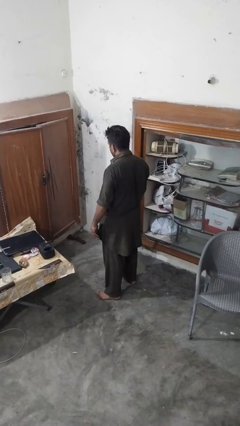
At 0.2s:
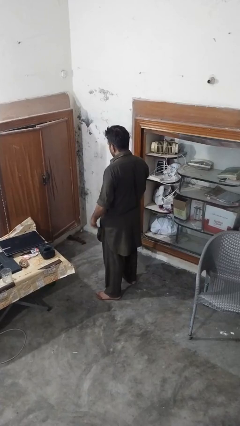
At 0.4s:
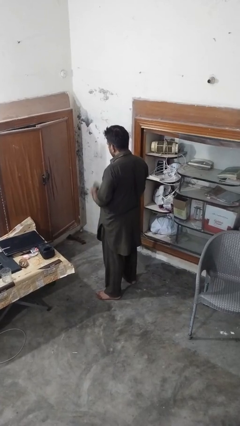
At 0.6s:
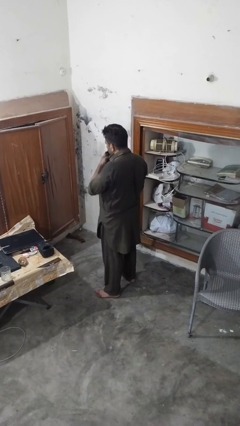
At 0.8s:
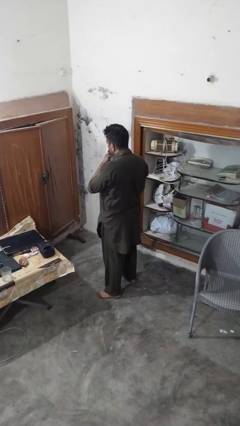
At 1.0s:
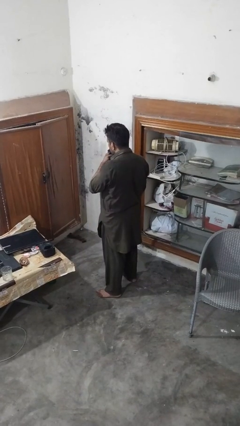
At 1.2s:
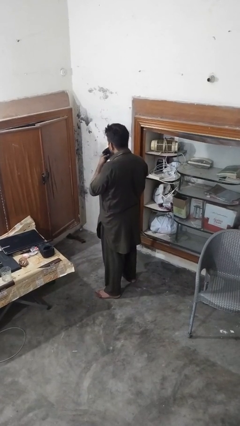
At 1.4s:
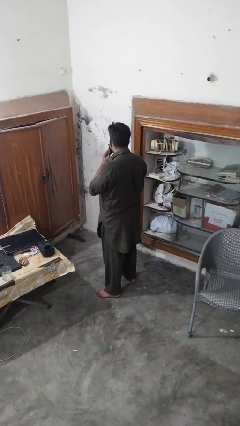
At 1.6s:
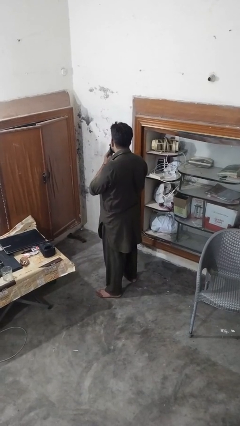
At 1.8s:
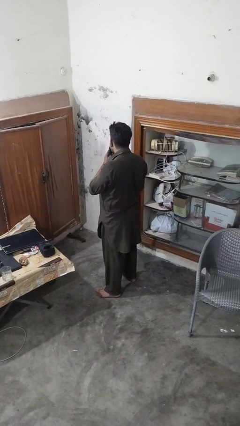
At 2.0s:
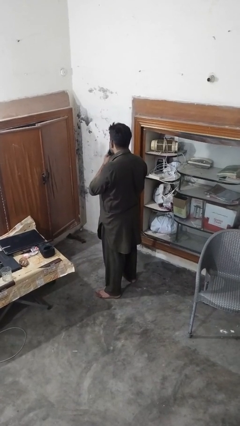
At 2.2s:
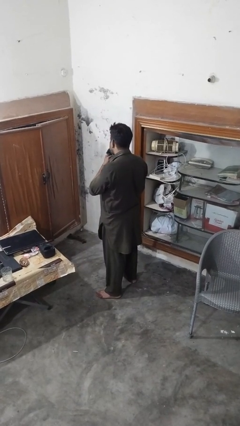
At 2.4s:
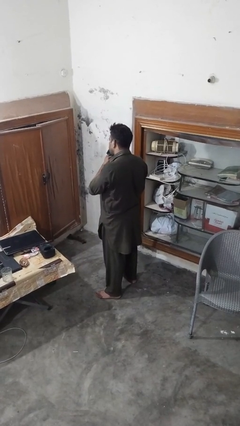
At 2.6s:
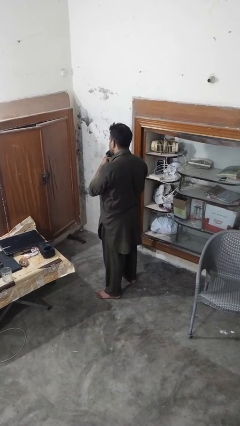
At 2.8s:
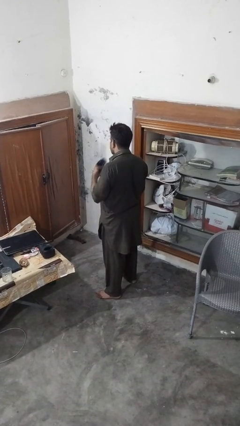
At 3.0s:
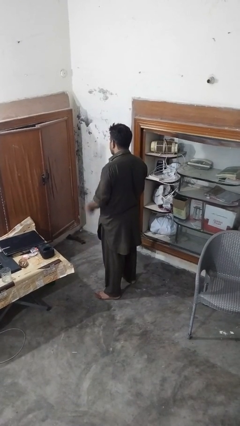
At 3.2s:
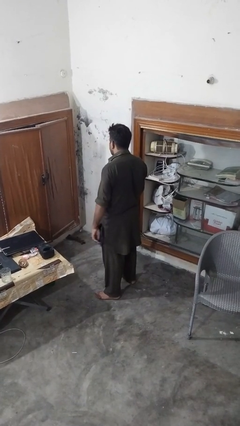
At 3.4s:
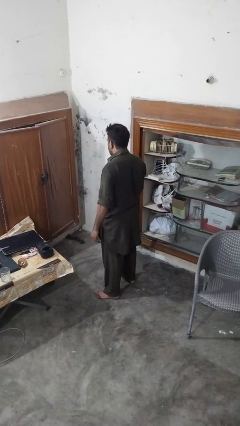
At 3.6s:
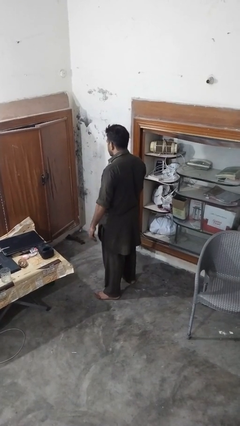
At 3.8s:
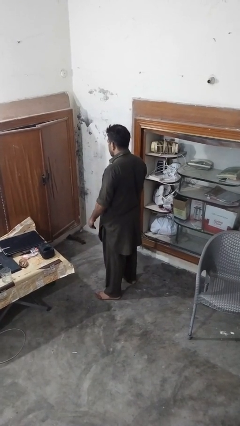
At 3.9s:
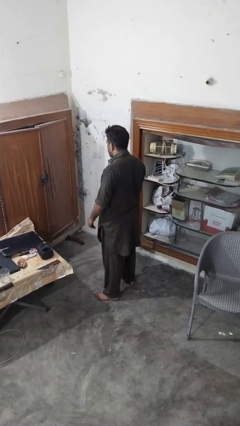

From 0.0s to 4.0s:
person wipes mouth with napkin

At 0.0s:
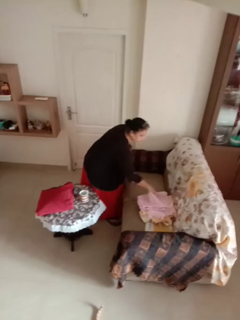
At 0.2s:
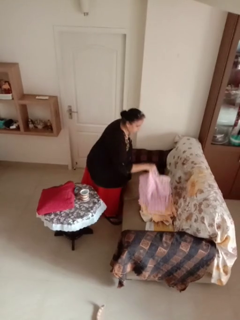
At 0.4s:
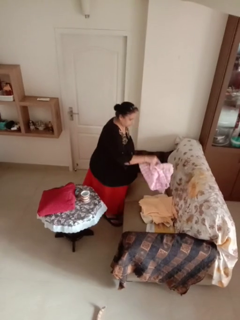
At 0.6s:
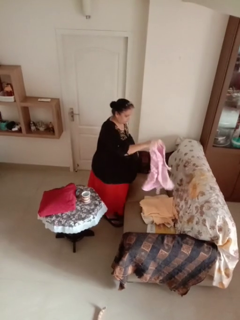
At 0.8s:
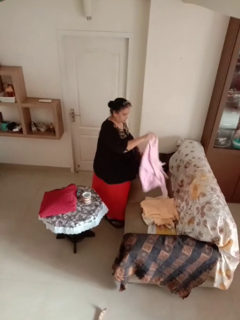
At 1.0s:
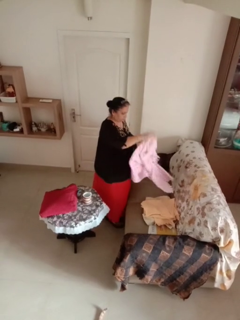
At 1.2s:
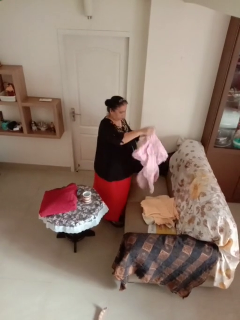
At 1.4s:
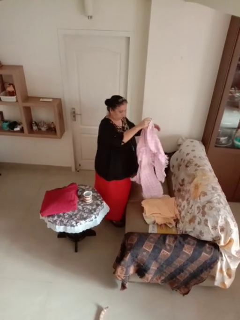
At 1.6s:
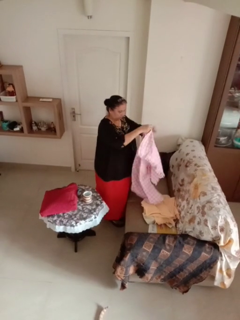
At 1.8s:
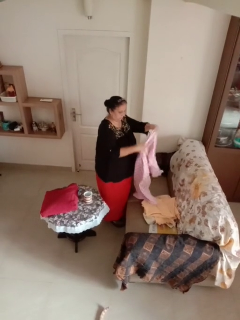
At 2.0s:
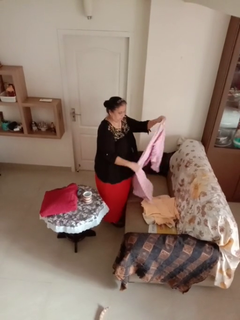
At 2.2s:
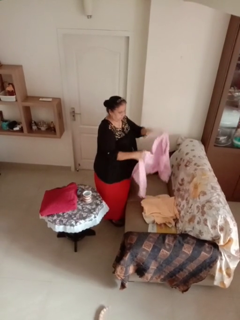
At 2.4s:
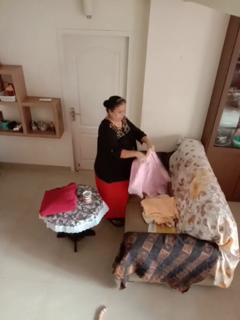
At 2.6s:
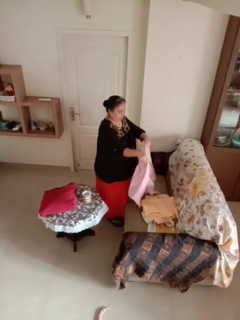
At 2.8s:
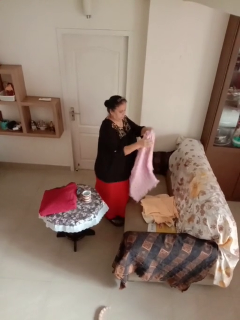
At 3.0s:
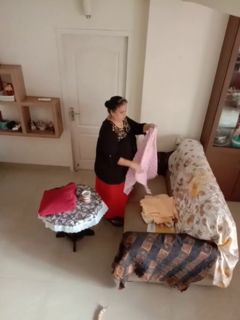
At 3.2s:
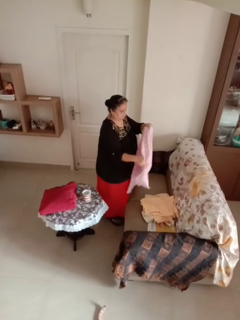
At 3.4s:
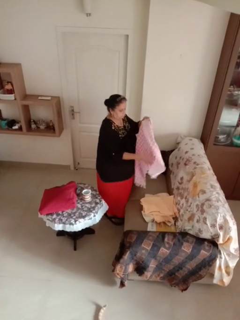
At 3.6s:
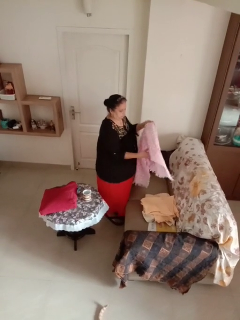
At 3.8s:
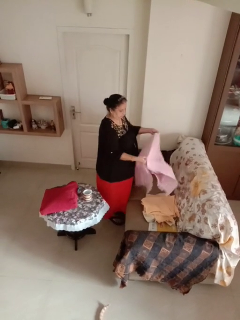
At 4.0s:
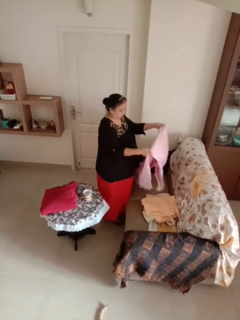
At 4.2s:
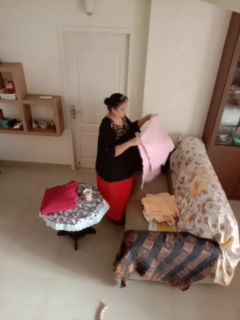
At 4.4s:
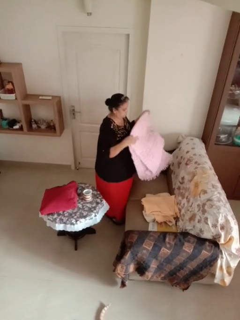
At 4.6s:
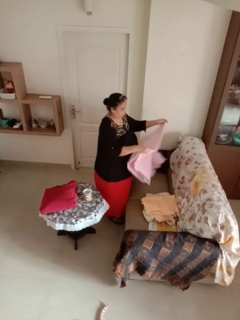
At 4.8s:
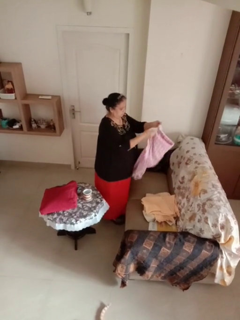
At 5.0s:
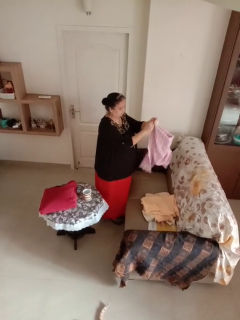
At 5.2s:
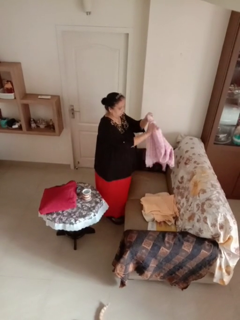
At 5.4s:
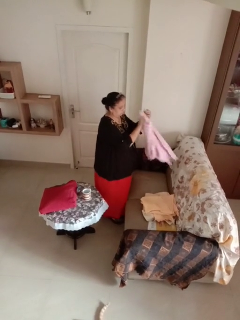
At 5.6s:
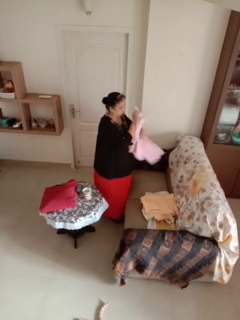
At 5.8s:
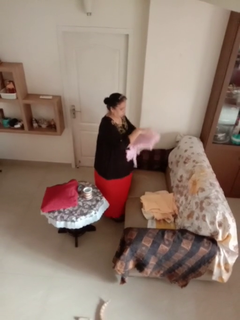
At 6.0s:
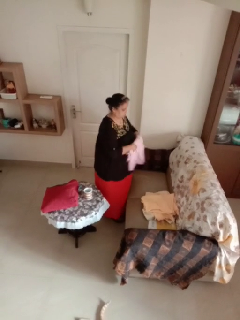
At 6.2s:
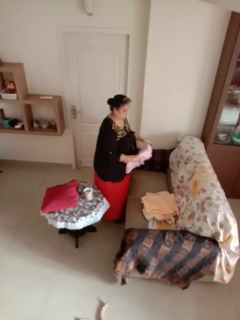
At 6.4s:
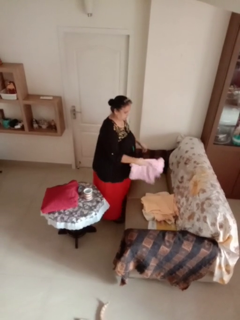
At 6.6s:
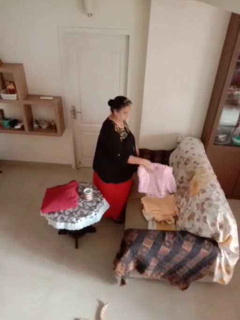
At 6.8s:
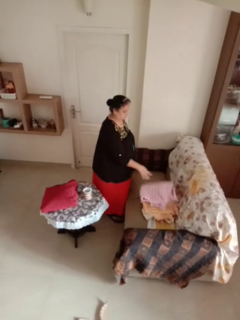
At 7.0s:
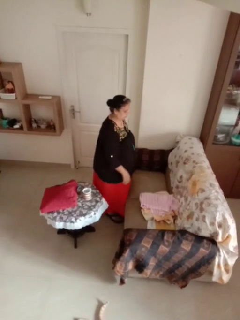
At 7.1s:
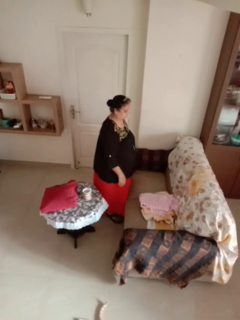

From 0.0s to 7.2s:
person folds towel

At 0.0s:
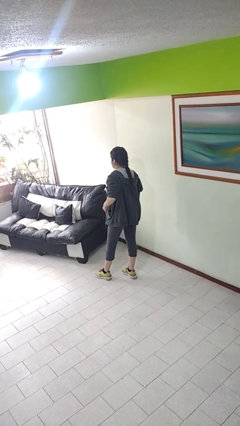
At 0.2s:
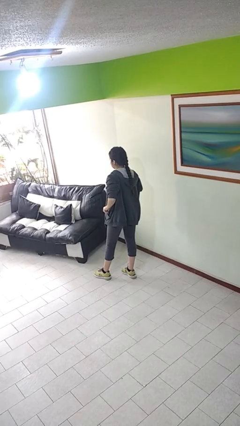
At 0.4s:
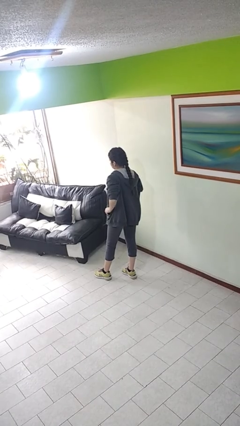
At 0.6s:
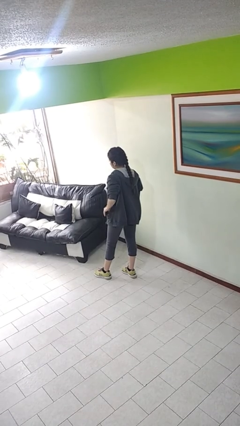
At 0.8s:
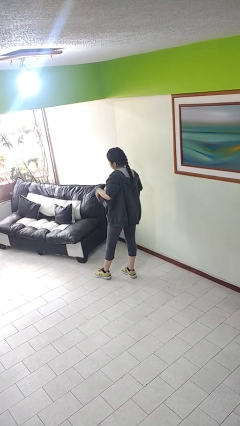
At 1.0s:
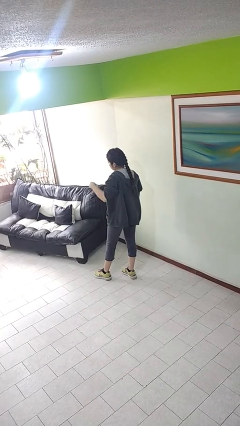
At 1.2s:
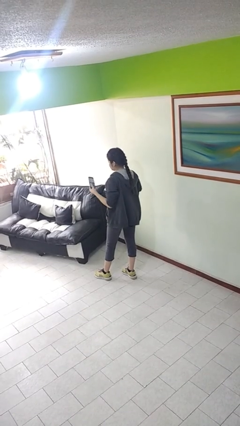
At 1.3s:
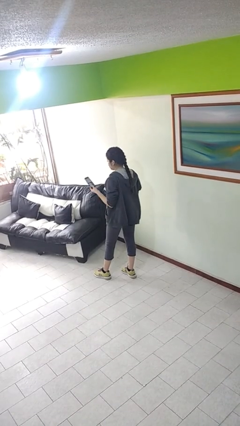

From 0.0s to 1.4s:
person takes phone from pocket

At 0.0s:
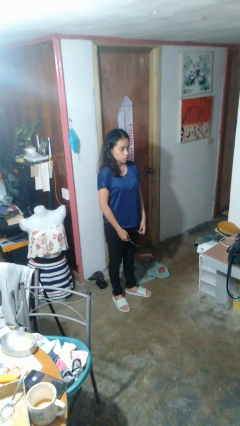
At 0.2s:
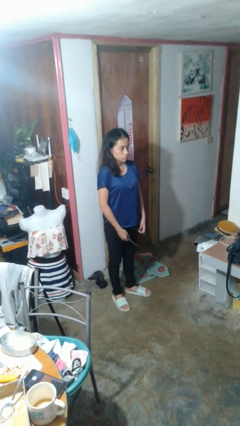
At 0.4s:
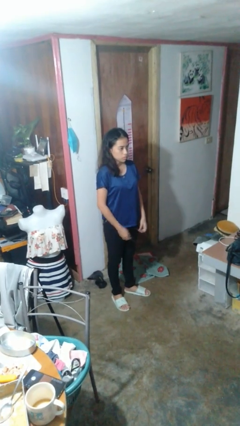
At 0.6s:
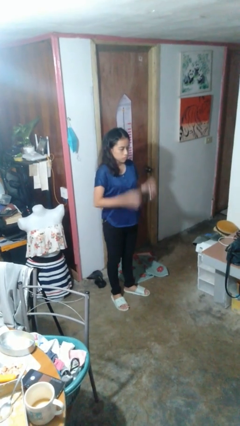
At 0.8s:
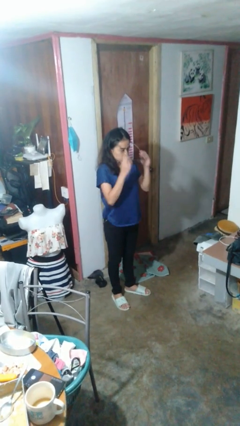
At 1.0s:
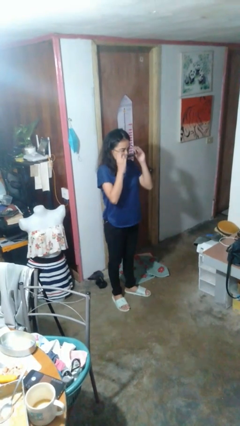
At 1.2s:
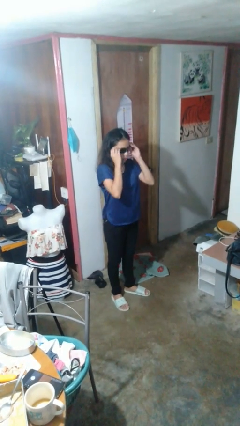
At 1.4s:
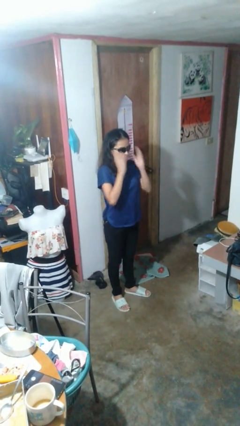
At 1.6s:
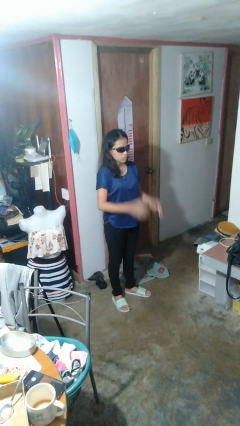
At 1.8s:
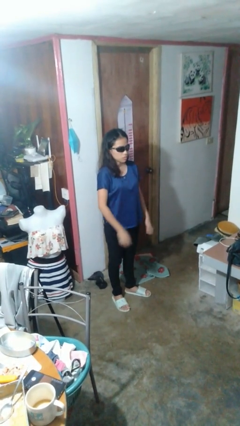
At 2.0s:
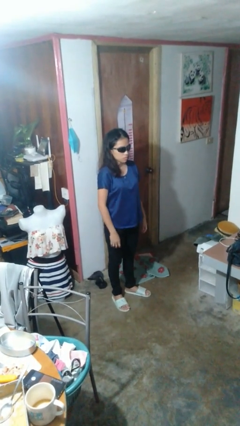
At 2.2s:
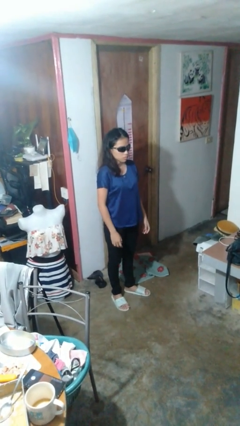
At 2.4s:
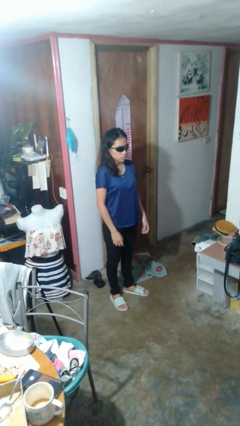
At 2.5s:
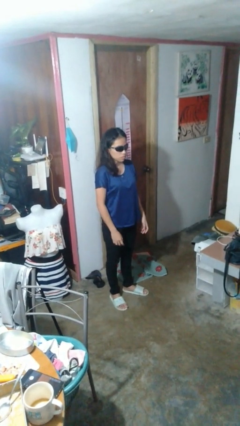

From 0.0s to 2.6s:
person puts on sunglasses

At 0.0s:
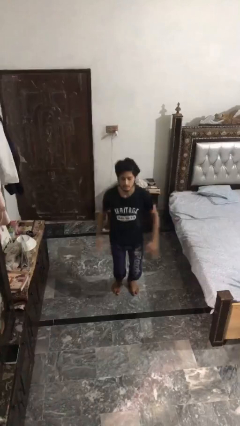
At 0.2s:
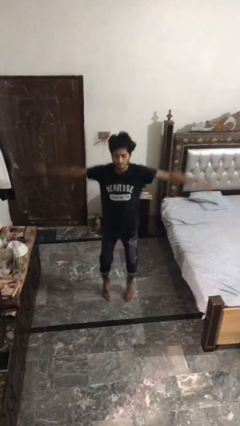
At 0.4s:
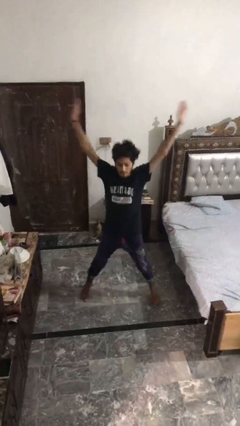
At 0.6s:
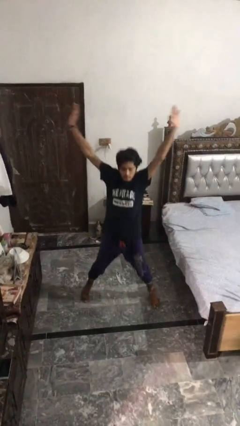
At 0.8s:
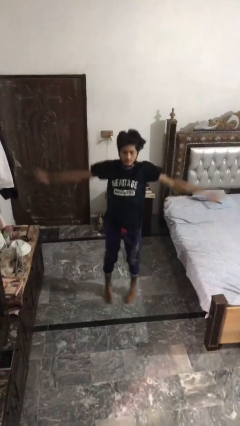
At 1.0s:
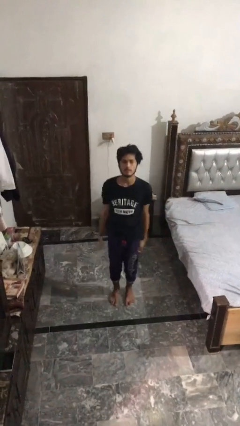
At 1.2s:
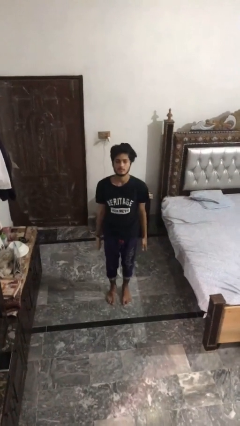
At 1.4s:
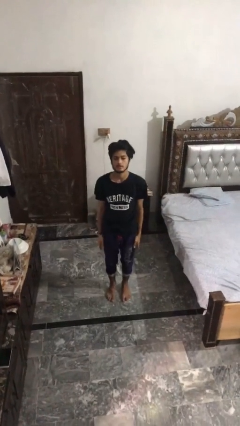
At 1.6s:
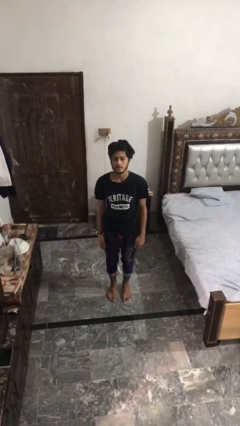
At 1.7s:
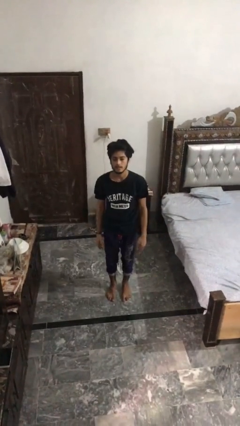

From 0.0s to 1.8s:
person exercises with jumping jacks

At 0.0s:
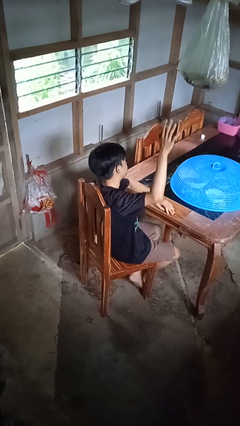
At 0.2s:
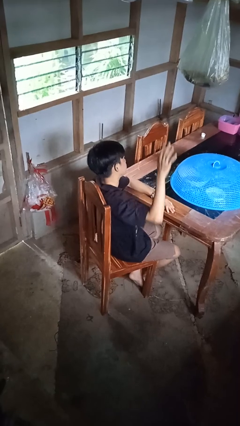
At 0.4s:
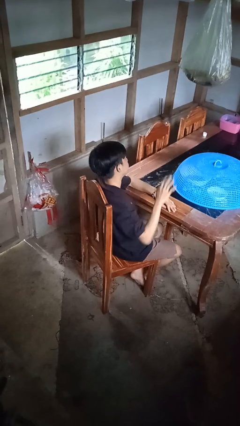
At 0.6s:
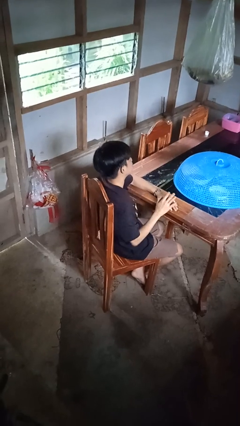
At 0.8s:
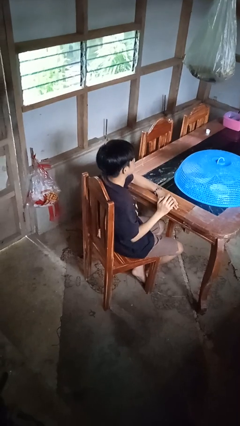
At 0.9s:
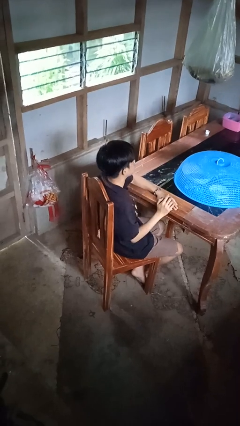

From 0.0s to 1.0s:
person gestures lower hand

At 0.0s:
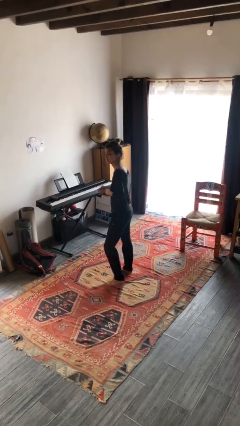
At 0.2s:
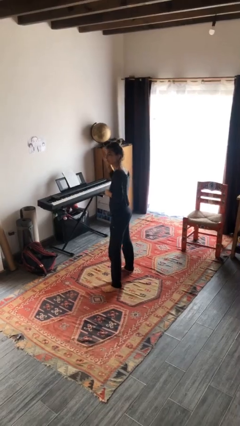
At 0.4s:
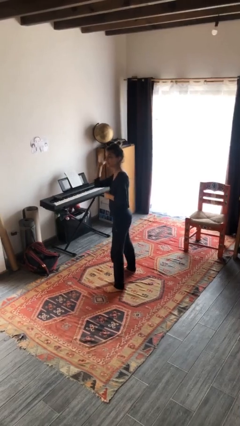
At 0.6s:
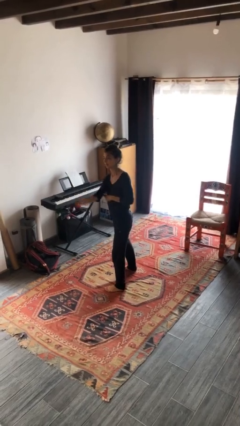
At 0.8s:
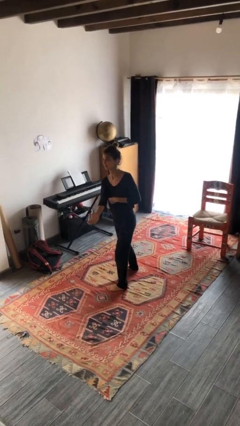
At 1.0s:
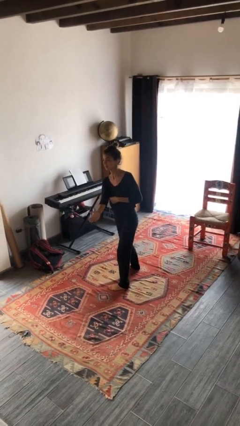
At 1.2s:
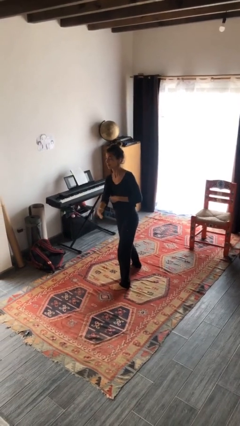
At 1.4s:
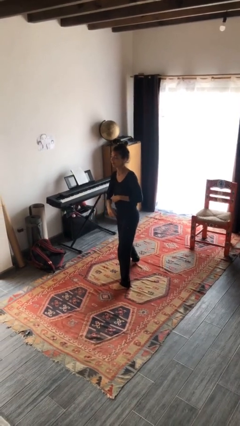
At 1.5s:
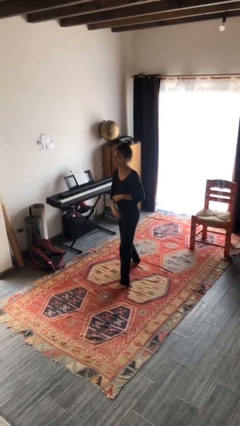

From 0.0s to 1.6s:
person karate chop
